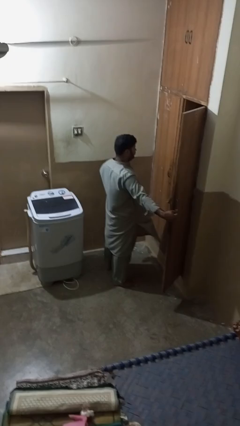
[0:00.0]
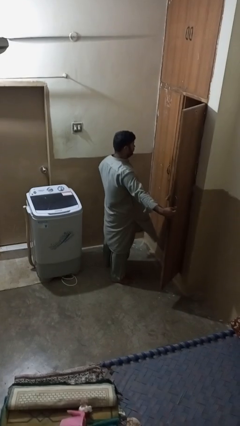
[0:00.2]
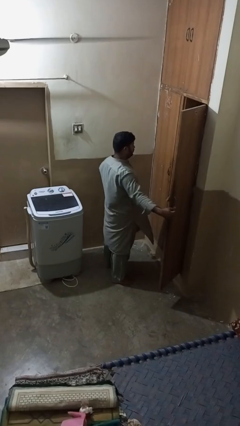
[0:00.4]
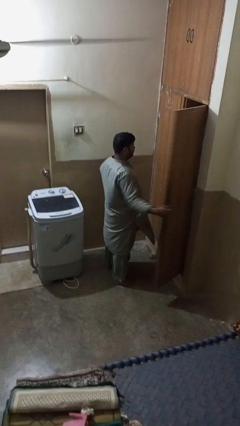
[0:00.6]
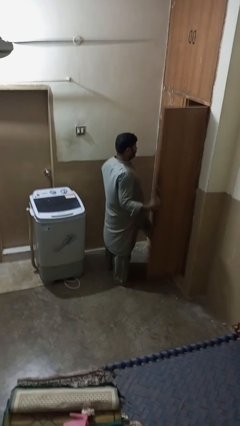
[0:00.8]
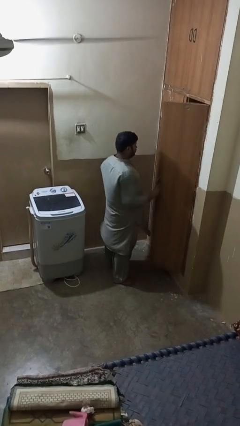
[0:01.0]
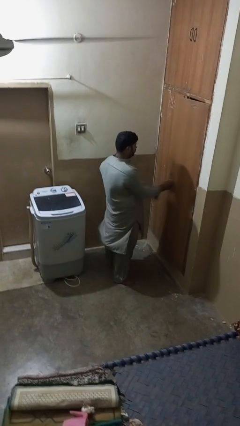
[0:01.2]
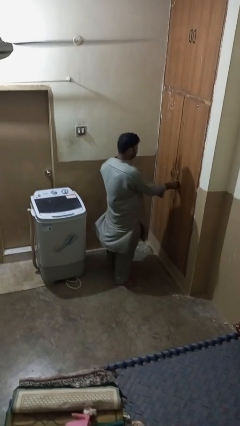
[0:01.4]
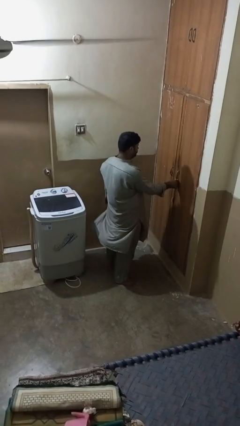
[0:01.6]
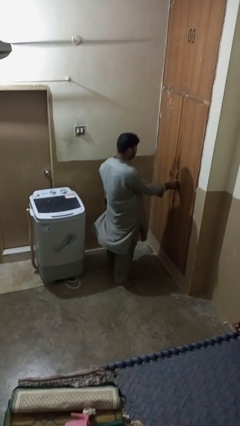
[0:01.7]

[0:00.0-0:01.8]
person closes closet door

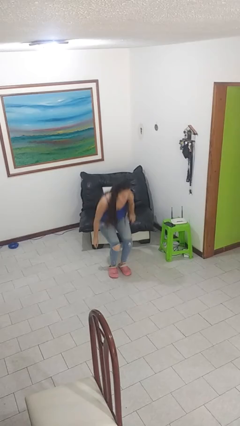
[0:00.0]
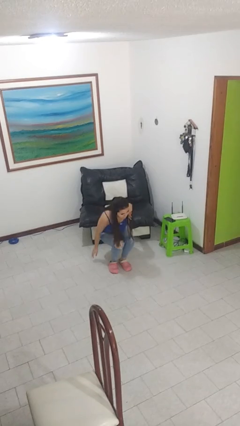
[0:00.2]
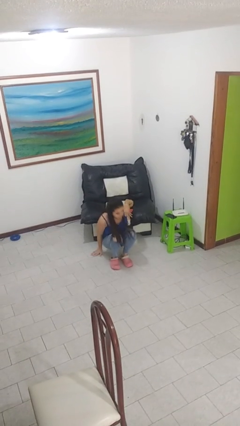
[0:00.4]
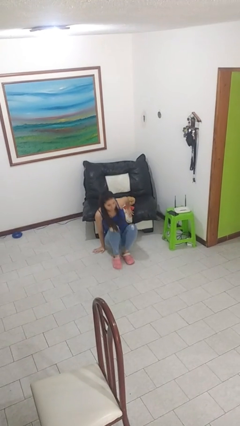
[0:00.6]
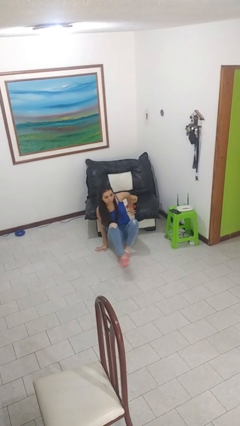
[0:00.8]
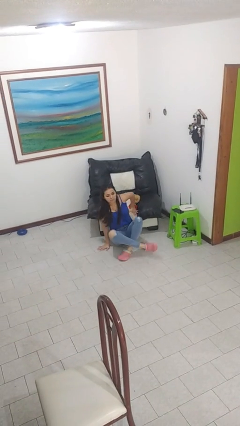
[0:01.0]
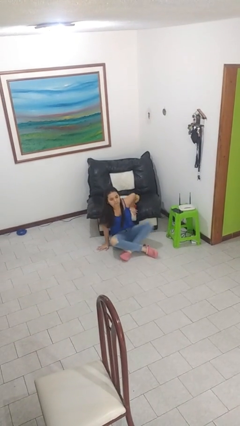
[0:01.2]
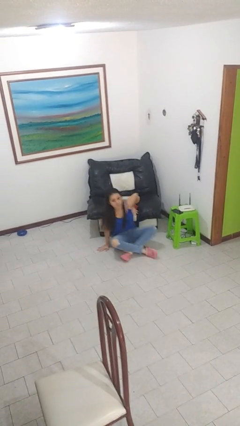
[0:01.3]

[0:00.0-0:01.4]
person sits crisscross

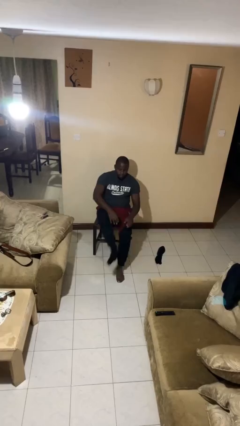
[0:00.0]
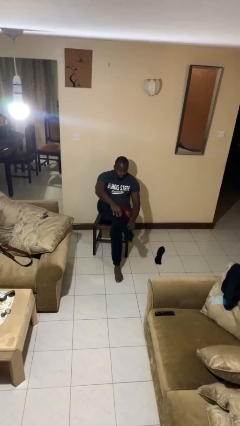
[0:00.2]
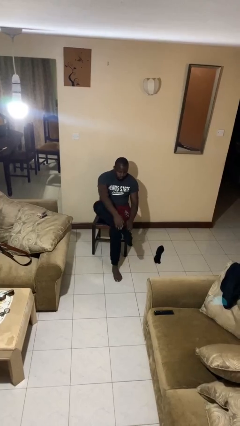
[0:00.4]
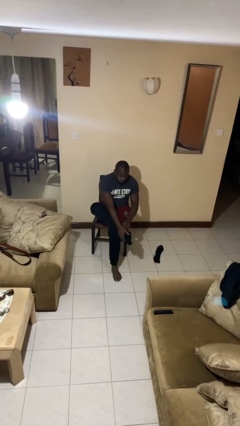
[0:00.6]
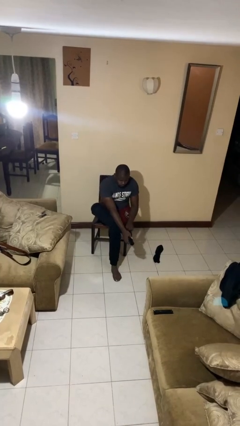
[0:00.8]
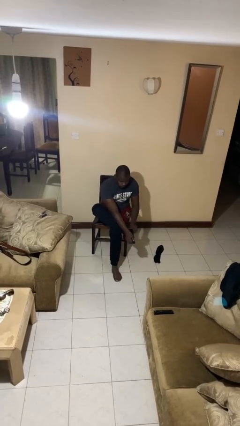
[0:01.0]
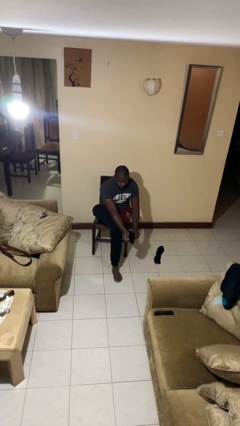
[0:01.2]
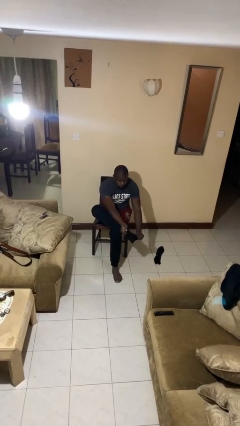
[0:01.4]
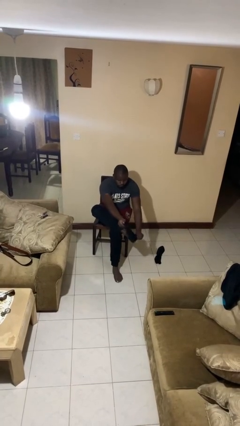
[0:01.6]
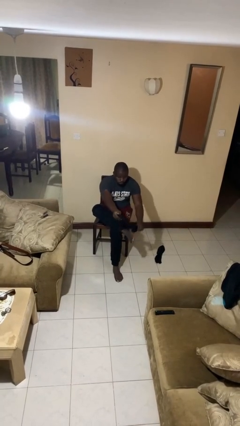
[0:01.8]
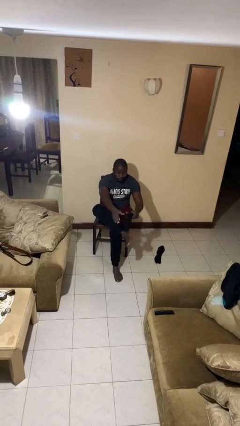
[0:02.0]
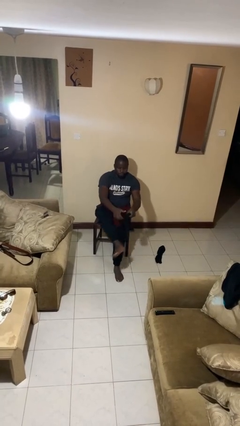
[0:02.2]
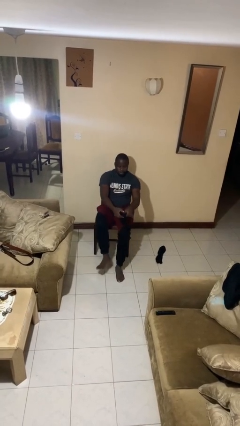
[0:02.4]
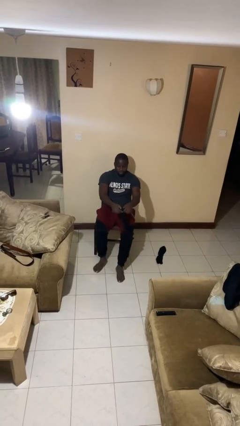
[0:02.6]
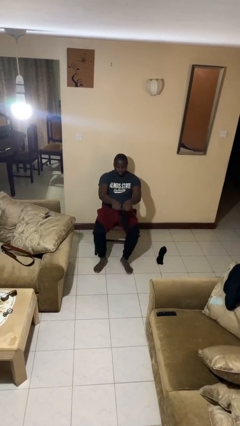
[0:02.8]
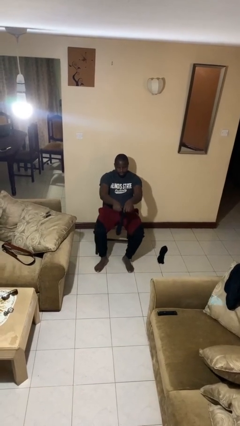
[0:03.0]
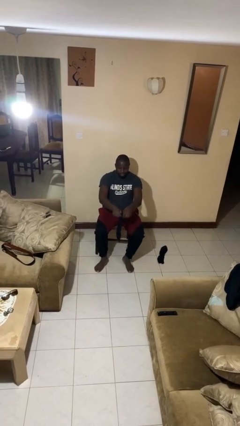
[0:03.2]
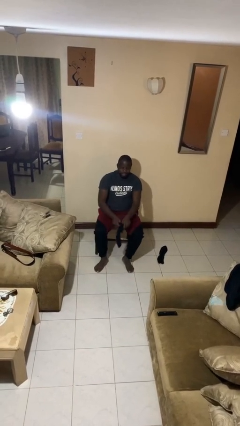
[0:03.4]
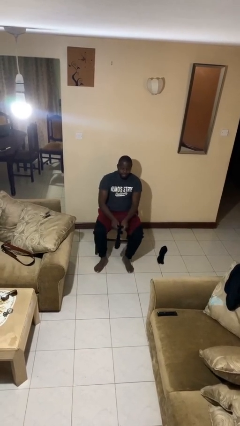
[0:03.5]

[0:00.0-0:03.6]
person takes off socks

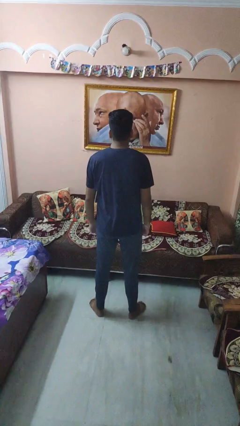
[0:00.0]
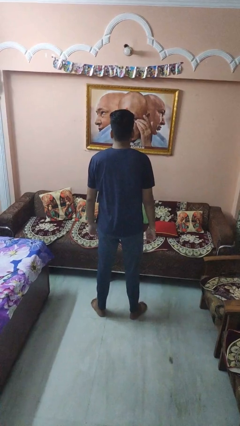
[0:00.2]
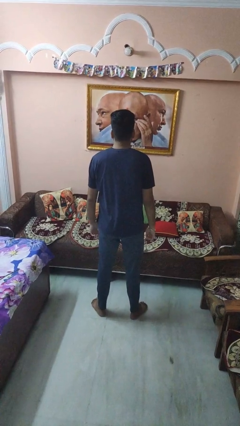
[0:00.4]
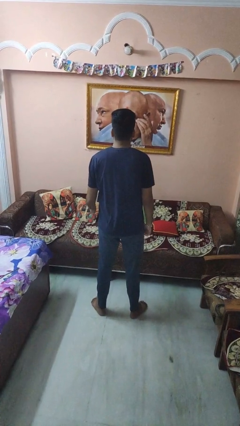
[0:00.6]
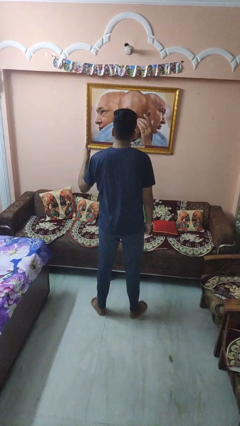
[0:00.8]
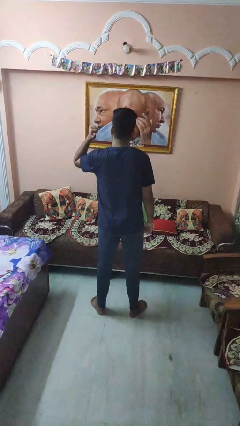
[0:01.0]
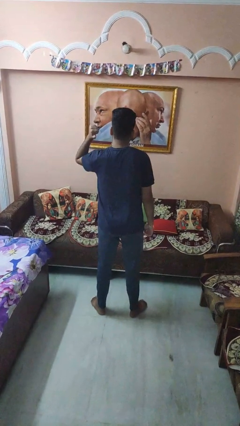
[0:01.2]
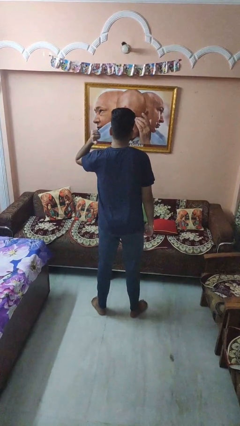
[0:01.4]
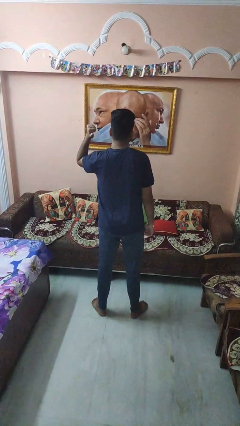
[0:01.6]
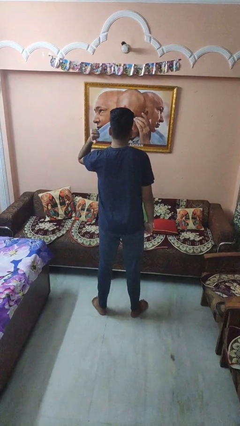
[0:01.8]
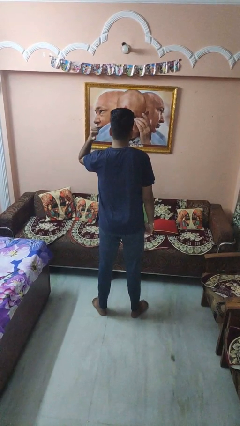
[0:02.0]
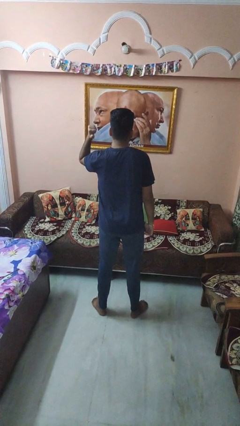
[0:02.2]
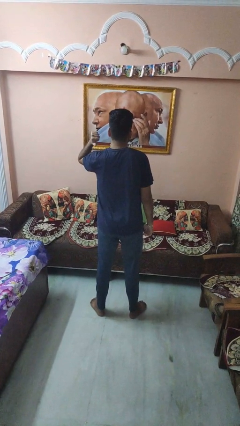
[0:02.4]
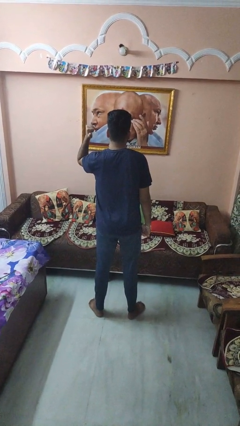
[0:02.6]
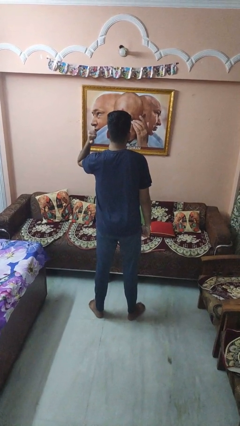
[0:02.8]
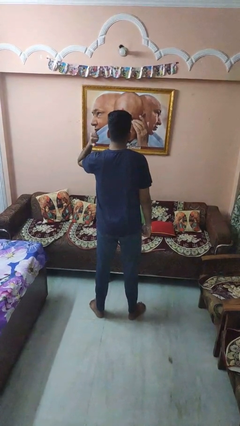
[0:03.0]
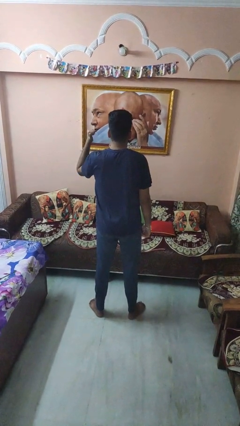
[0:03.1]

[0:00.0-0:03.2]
person gestures behind me

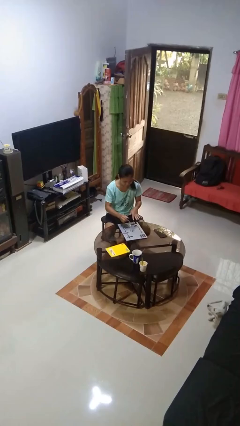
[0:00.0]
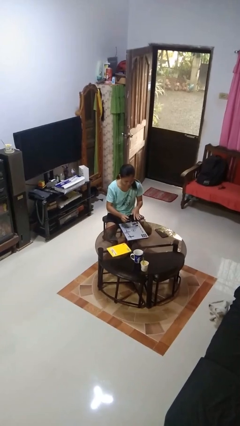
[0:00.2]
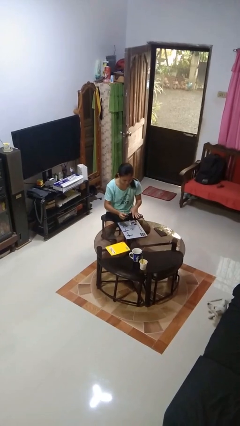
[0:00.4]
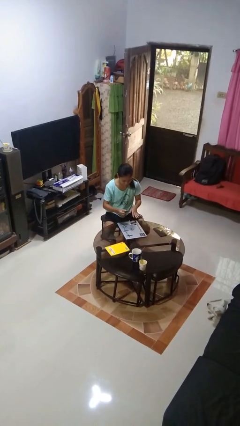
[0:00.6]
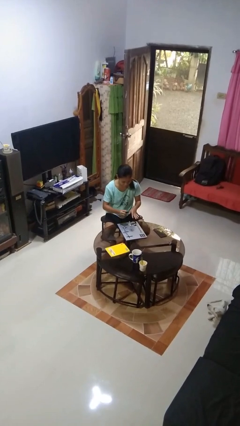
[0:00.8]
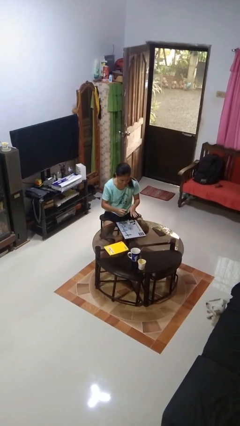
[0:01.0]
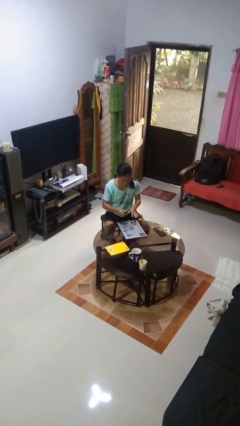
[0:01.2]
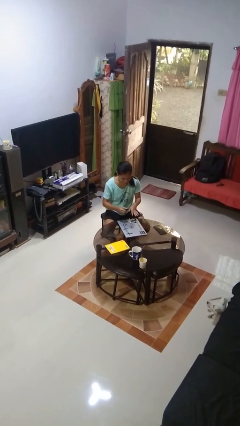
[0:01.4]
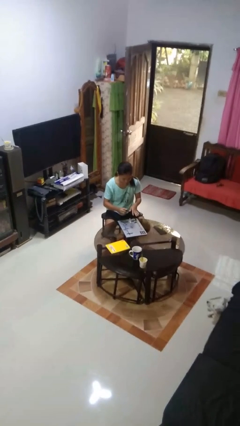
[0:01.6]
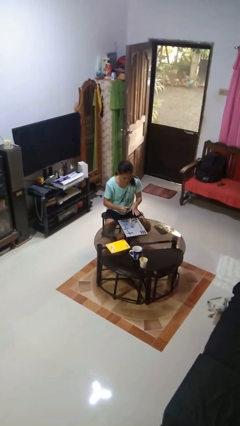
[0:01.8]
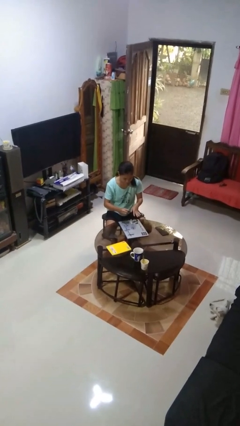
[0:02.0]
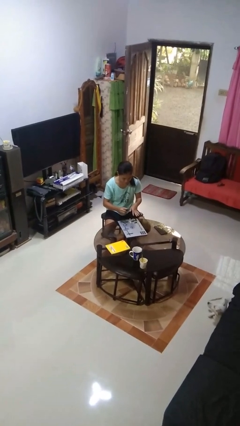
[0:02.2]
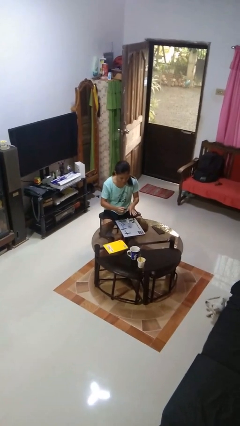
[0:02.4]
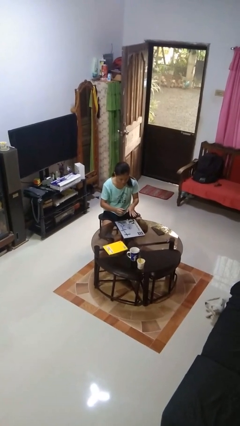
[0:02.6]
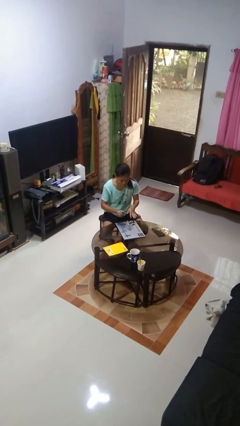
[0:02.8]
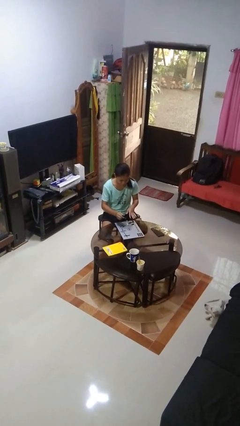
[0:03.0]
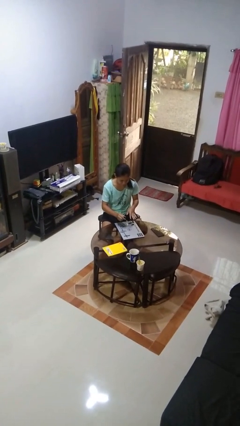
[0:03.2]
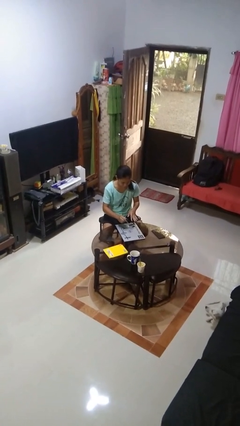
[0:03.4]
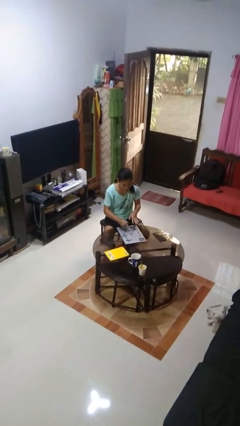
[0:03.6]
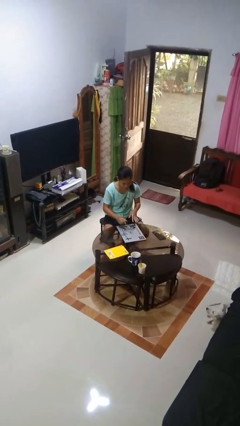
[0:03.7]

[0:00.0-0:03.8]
person paints fingernails

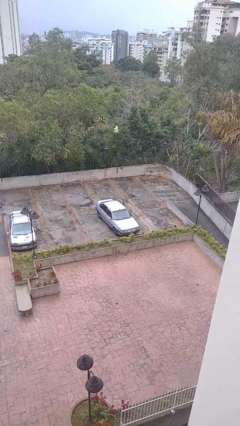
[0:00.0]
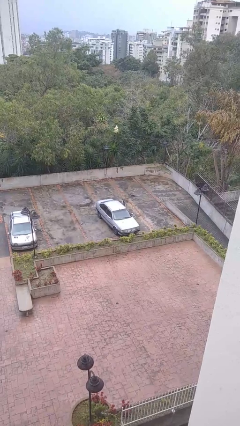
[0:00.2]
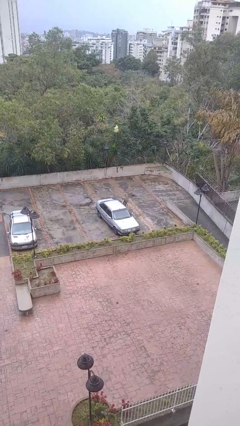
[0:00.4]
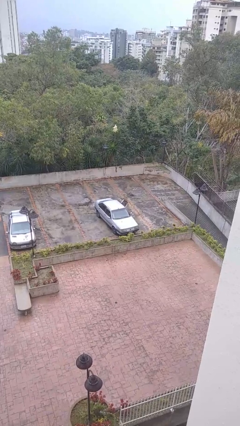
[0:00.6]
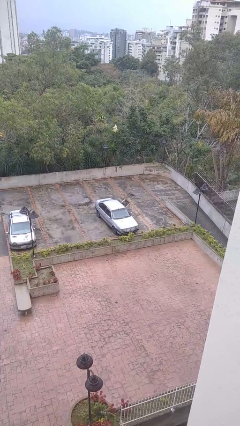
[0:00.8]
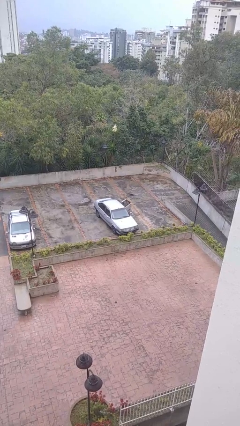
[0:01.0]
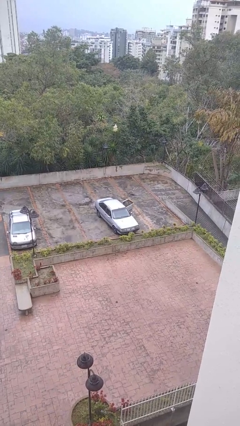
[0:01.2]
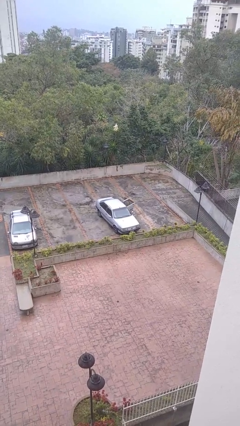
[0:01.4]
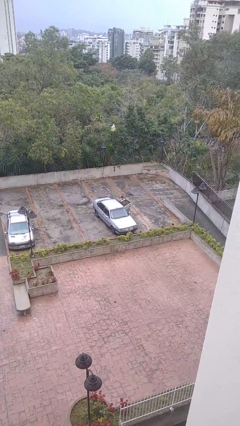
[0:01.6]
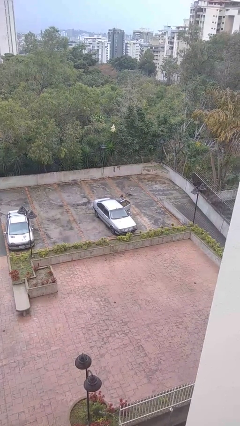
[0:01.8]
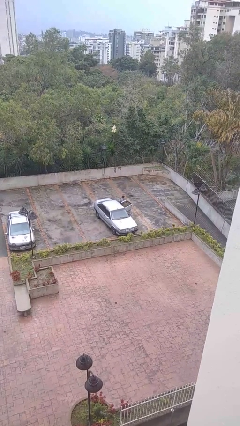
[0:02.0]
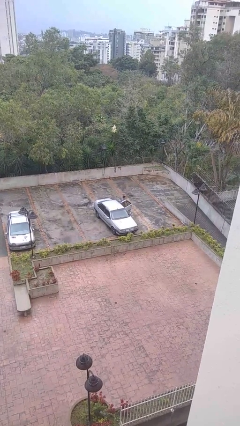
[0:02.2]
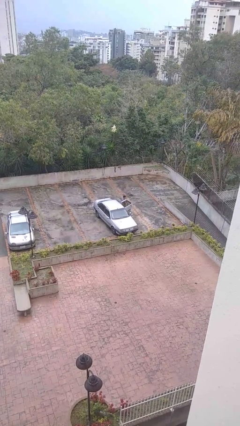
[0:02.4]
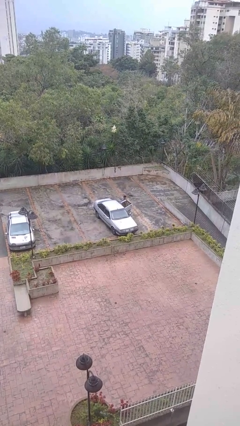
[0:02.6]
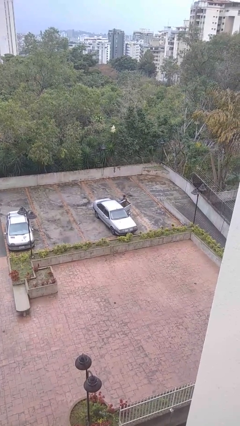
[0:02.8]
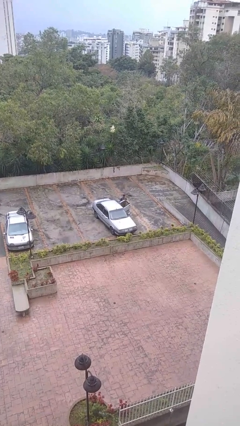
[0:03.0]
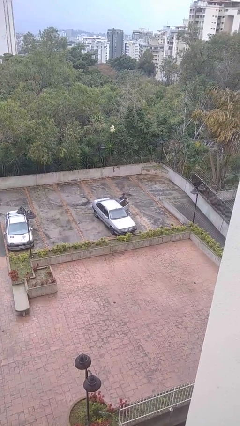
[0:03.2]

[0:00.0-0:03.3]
car drops off person

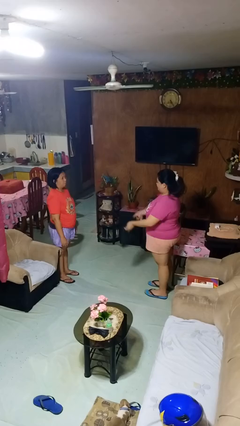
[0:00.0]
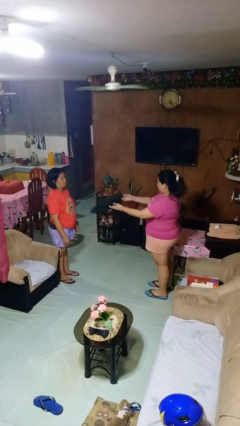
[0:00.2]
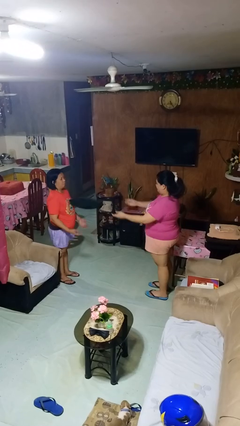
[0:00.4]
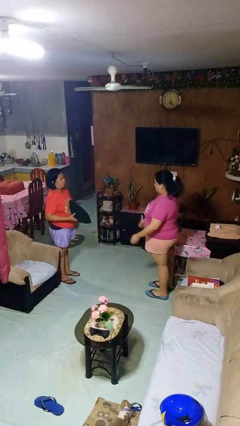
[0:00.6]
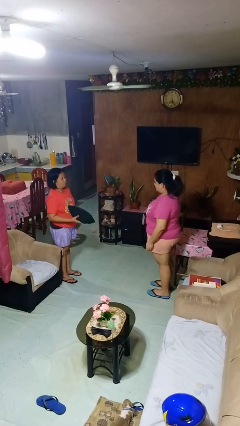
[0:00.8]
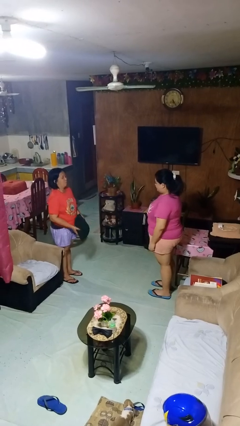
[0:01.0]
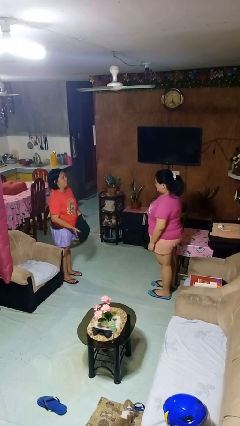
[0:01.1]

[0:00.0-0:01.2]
person throws object to person
